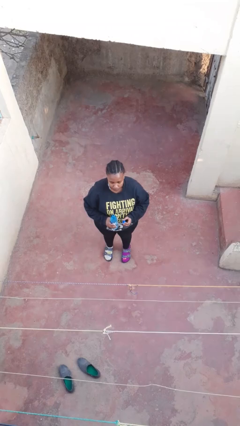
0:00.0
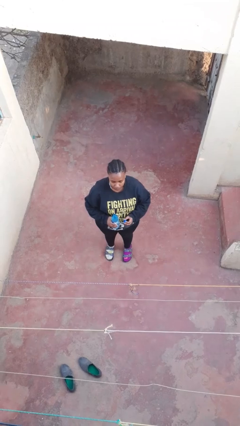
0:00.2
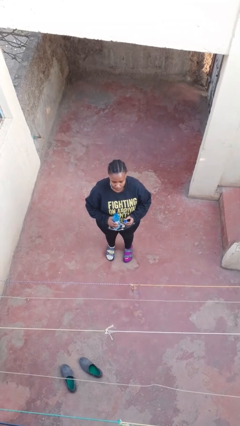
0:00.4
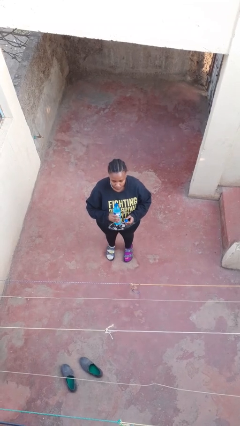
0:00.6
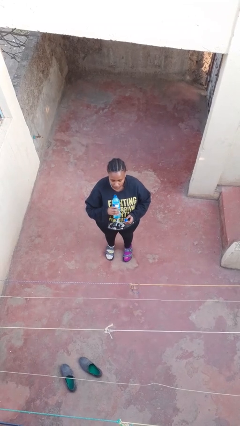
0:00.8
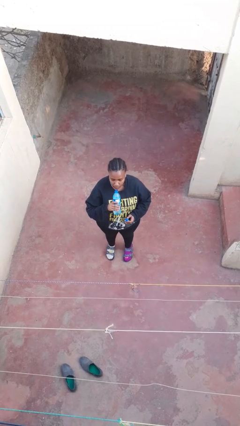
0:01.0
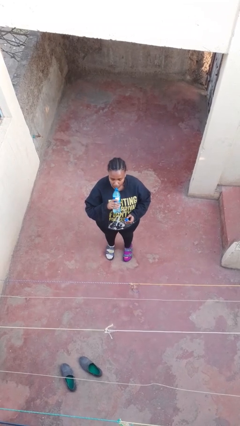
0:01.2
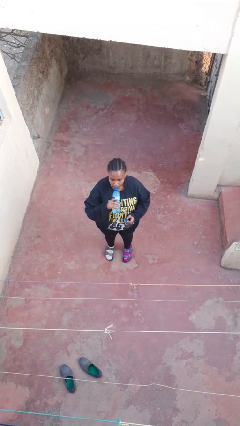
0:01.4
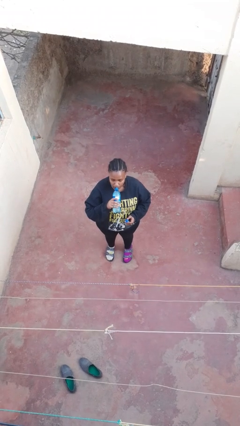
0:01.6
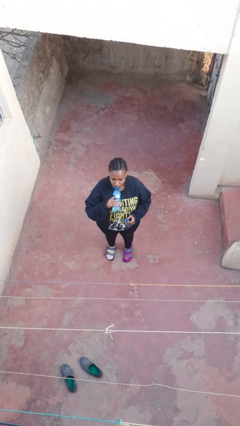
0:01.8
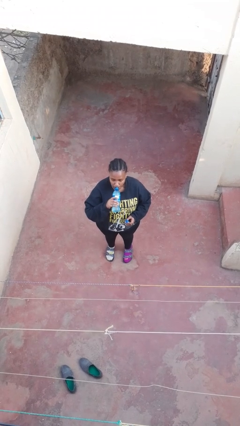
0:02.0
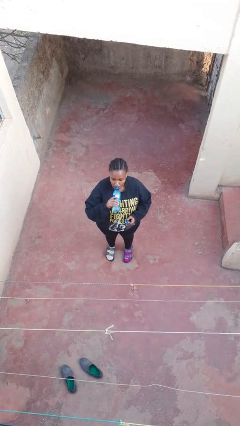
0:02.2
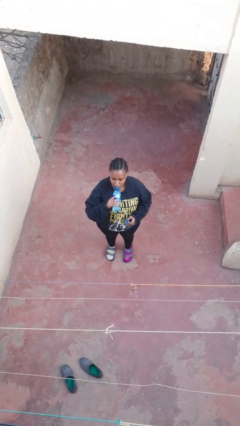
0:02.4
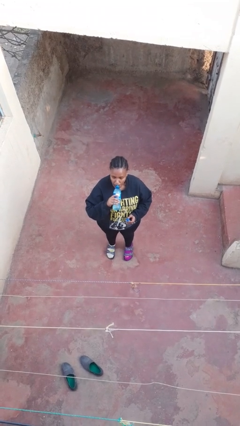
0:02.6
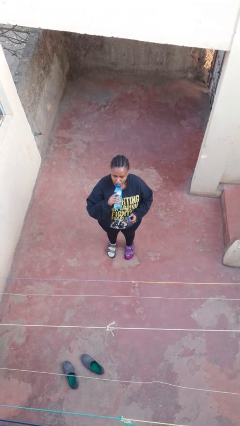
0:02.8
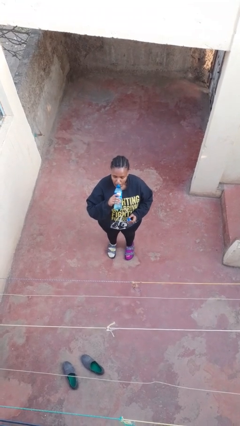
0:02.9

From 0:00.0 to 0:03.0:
person drinks from bottle

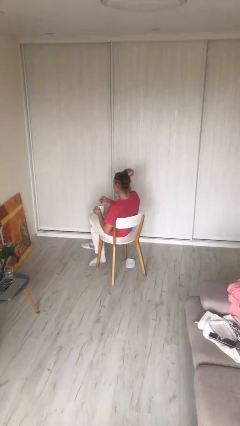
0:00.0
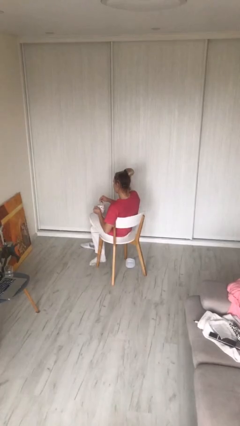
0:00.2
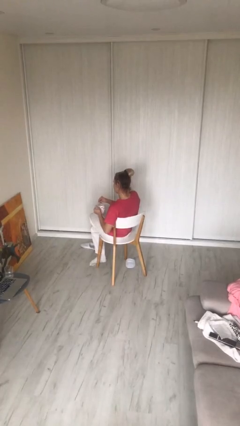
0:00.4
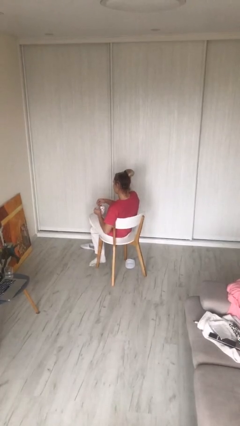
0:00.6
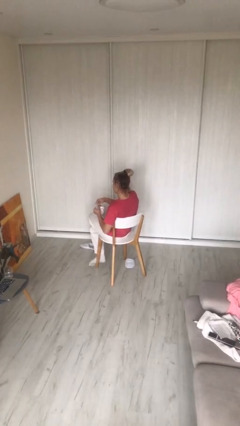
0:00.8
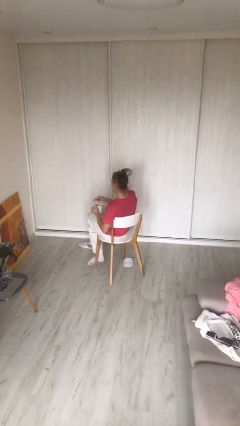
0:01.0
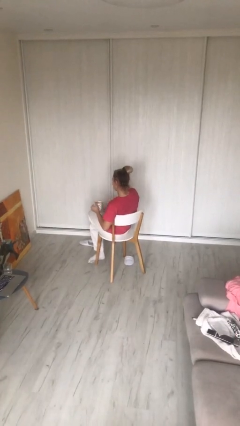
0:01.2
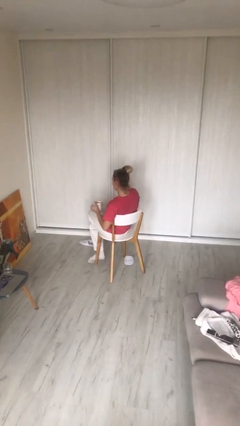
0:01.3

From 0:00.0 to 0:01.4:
person stirs mug

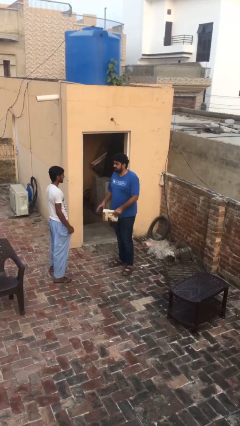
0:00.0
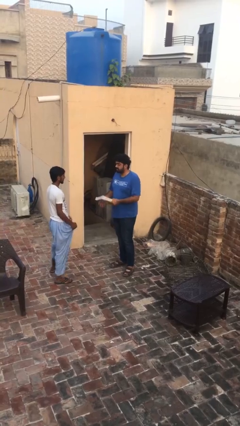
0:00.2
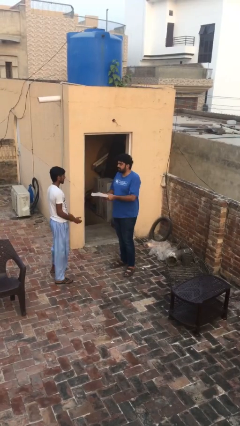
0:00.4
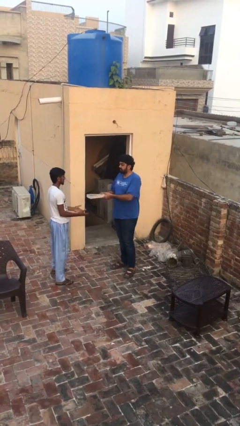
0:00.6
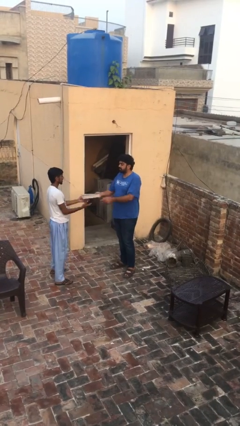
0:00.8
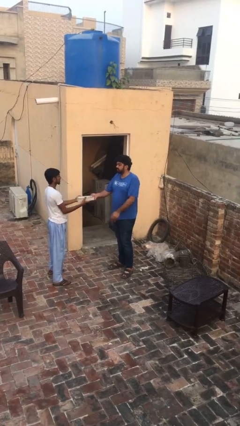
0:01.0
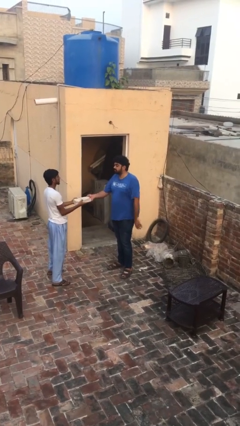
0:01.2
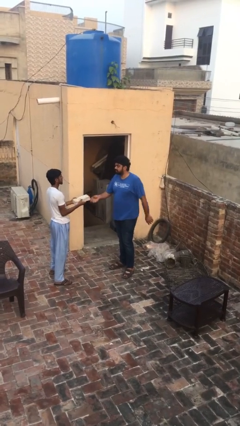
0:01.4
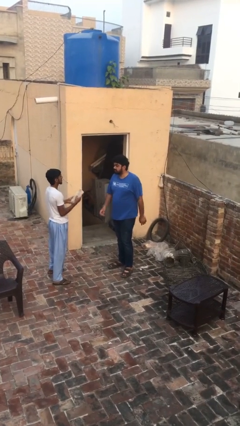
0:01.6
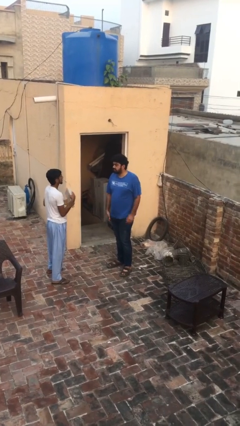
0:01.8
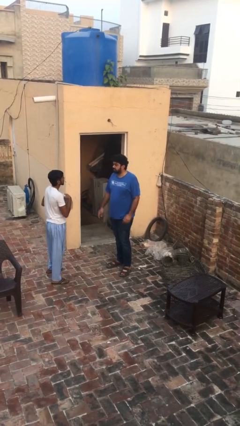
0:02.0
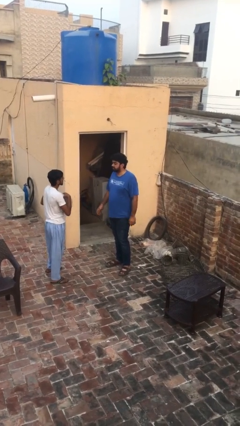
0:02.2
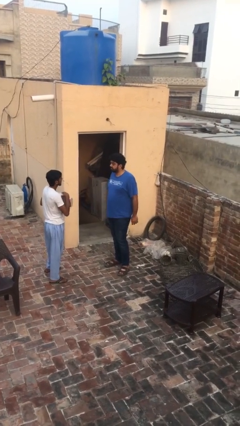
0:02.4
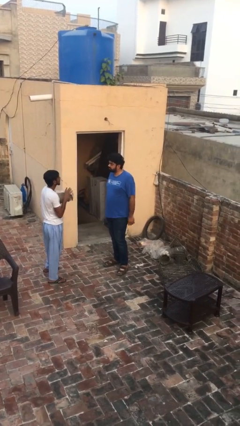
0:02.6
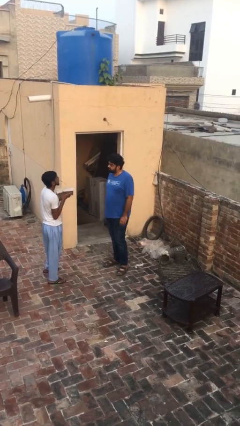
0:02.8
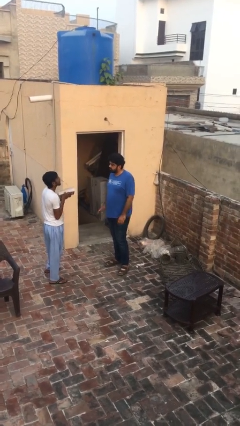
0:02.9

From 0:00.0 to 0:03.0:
person transfers object to person

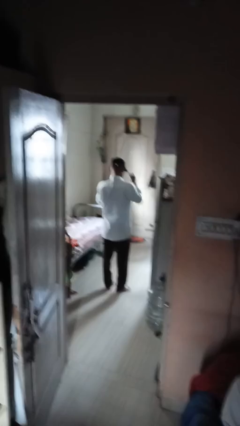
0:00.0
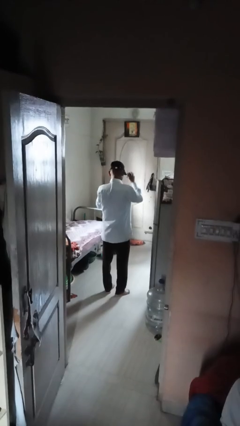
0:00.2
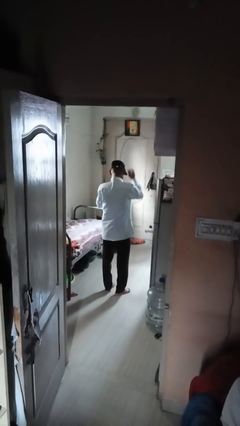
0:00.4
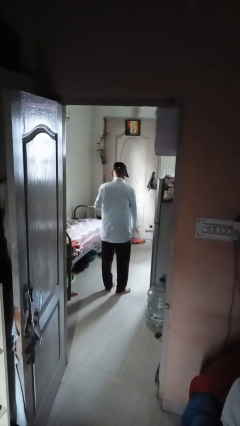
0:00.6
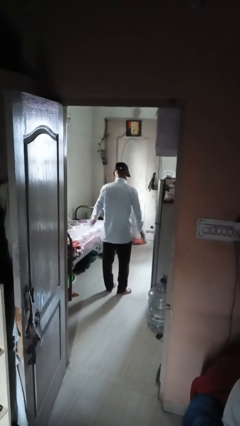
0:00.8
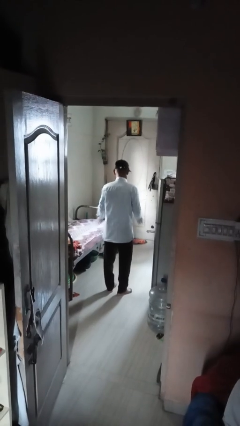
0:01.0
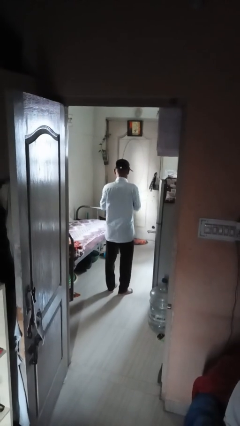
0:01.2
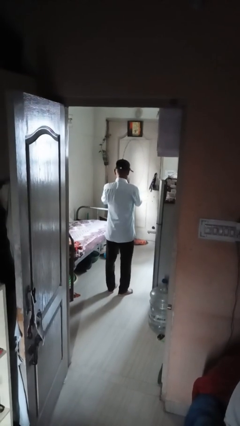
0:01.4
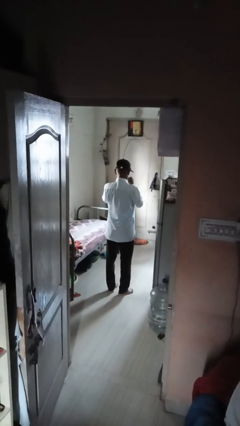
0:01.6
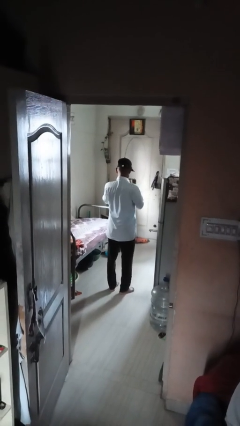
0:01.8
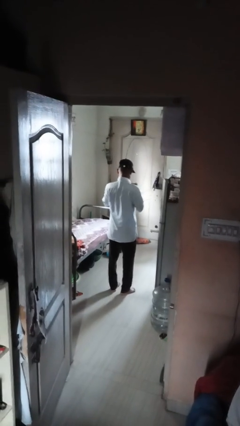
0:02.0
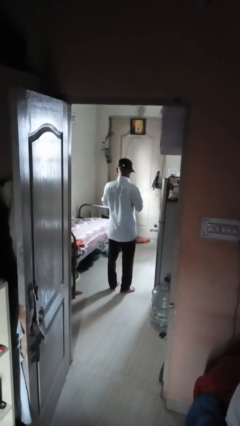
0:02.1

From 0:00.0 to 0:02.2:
person bounces ball on floor

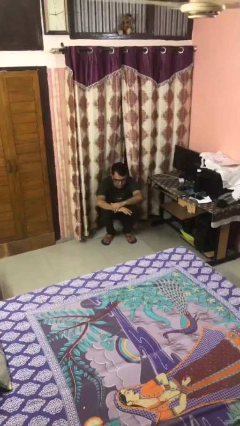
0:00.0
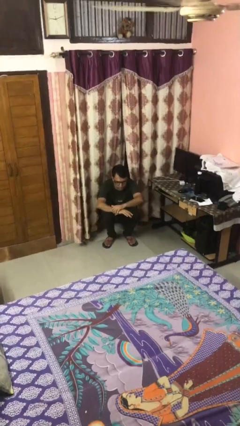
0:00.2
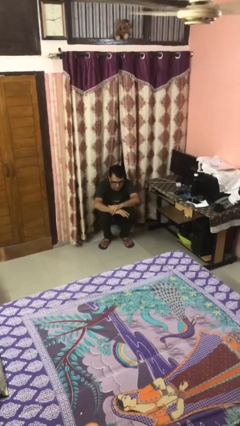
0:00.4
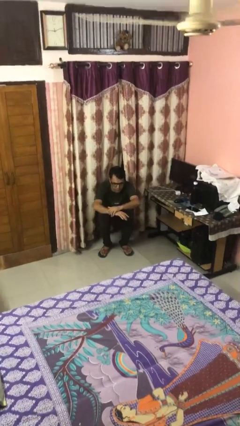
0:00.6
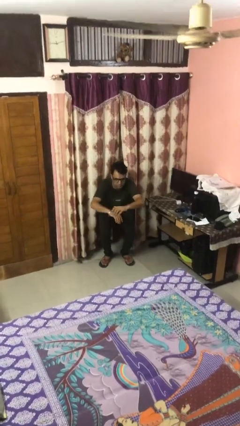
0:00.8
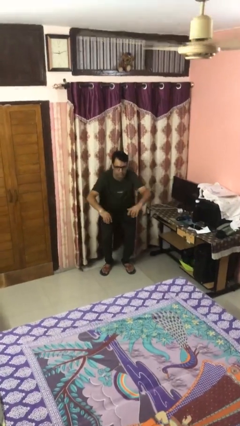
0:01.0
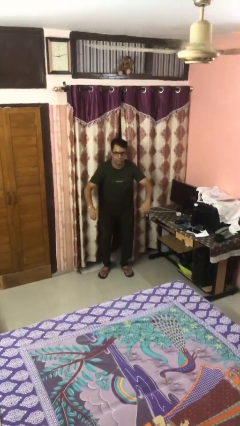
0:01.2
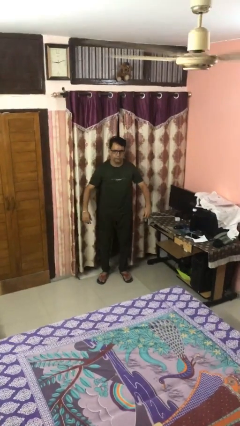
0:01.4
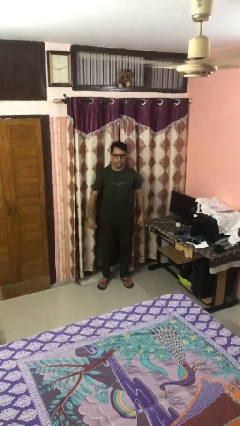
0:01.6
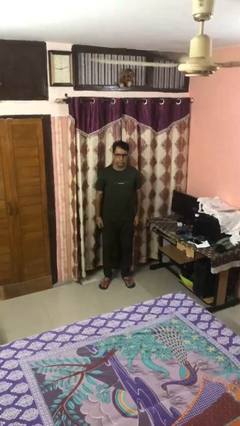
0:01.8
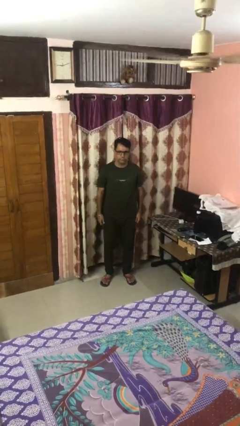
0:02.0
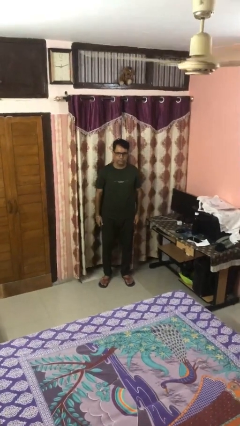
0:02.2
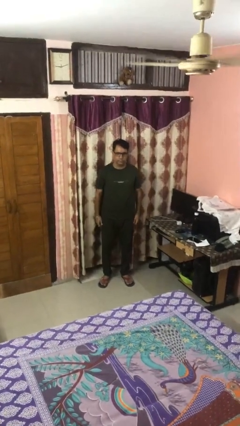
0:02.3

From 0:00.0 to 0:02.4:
person stands up

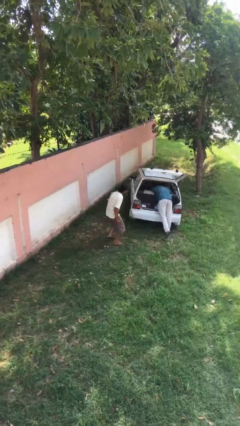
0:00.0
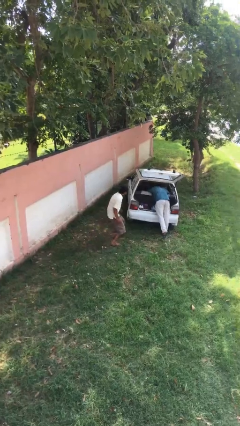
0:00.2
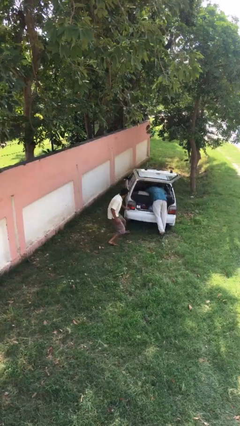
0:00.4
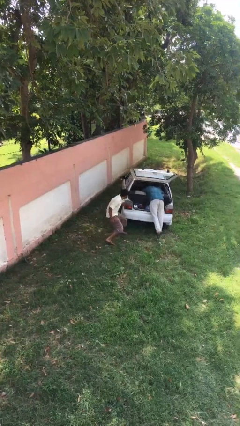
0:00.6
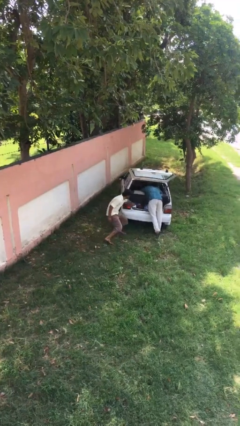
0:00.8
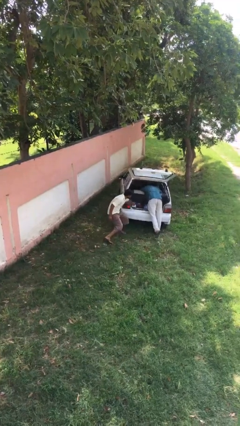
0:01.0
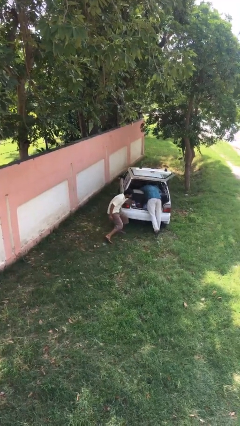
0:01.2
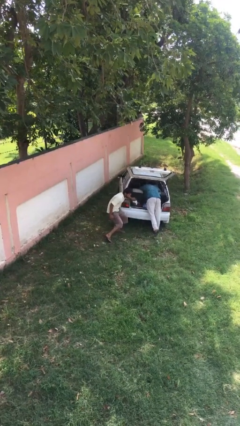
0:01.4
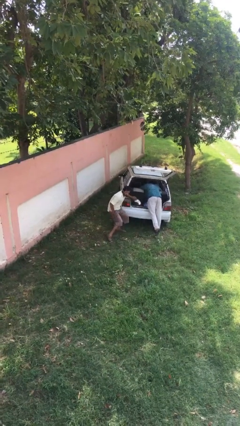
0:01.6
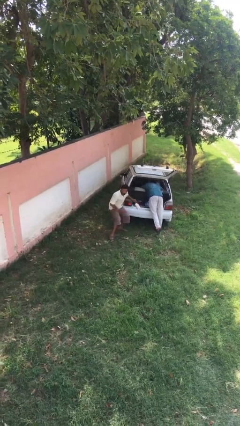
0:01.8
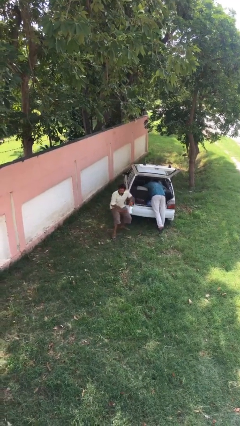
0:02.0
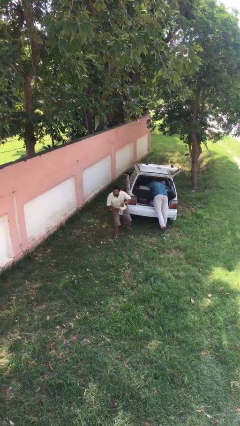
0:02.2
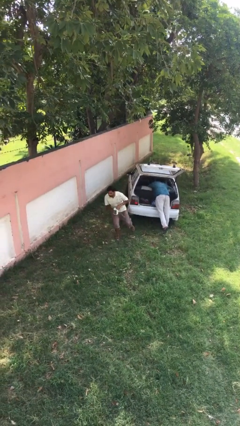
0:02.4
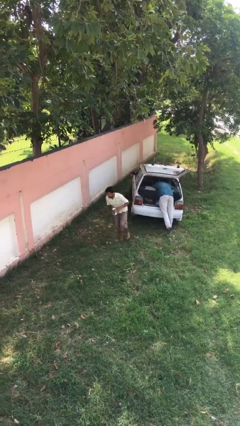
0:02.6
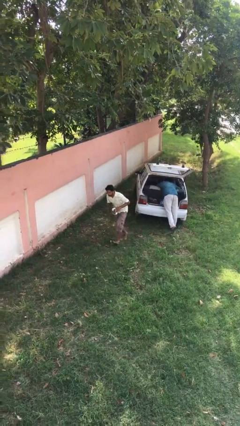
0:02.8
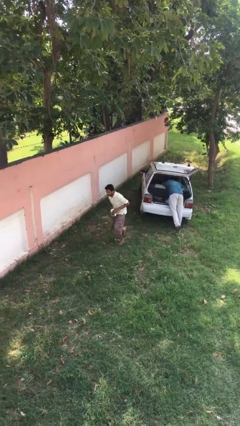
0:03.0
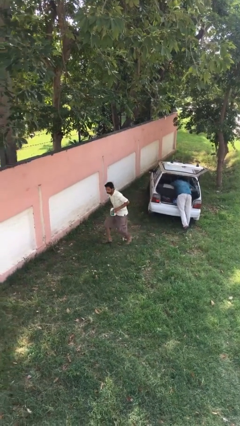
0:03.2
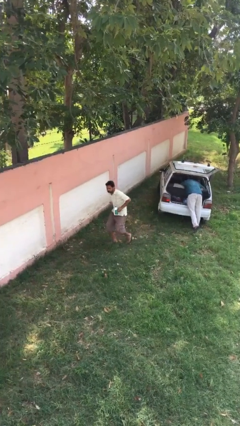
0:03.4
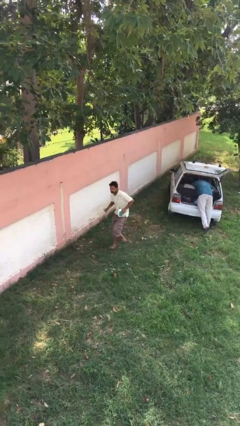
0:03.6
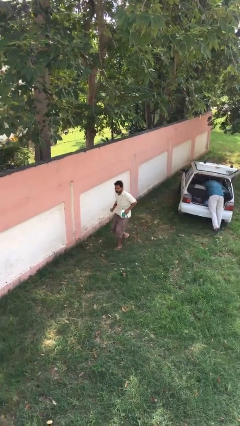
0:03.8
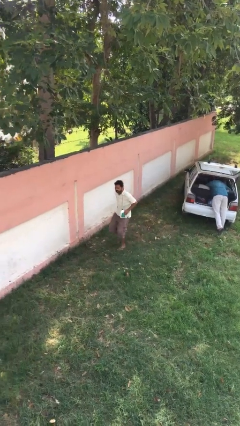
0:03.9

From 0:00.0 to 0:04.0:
person steals object from person

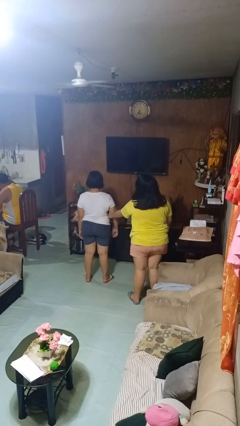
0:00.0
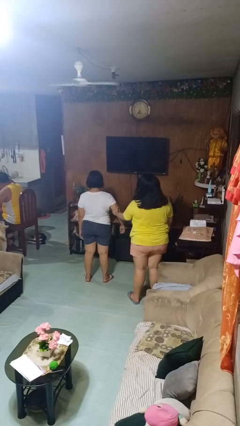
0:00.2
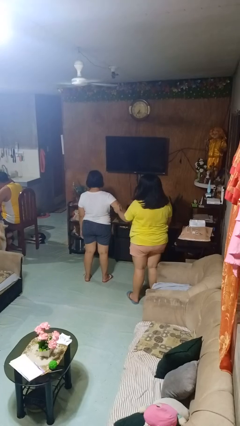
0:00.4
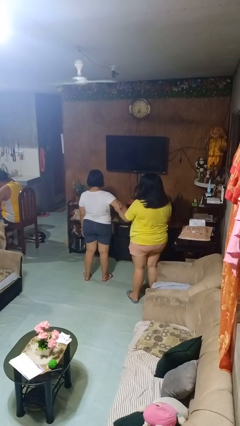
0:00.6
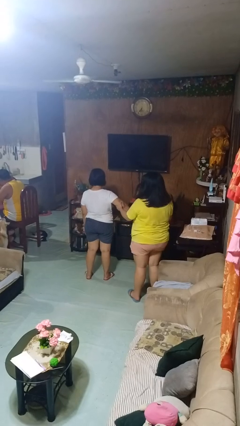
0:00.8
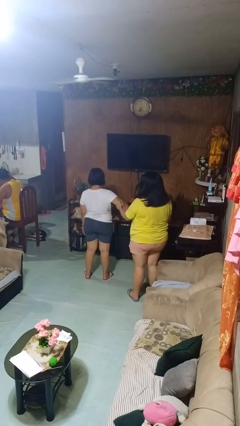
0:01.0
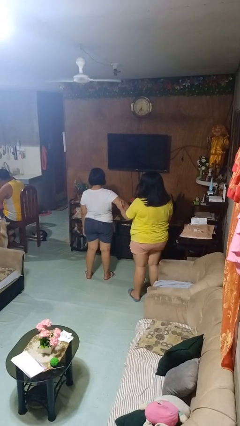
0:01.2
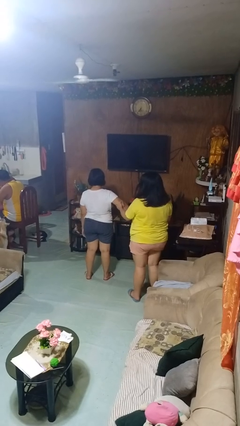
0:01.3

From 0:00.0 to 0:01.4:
person grabs person by bicep

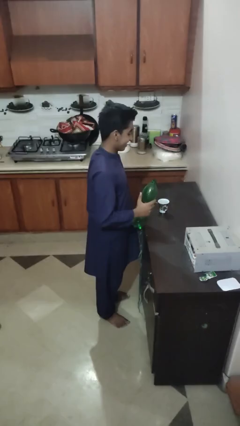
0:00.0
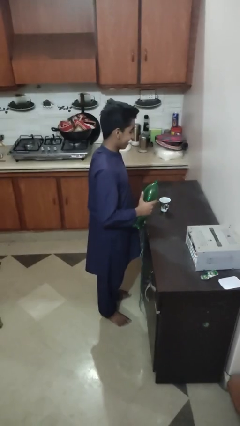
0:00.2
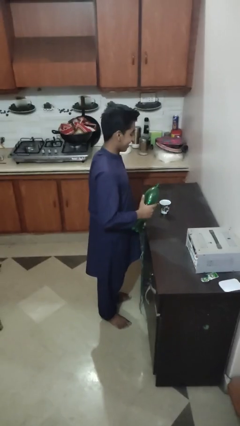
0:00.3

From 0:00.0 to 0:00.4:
person pours liquid into cup
